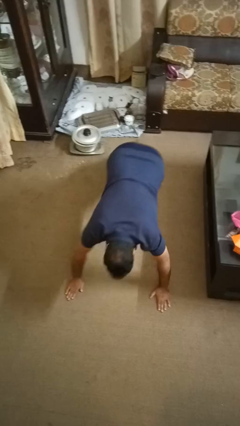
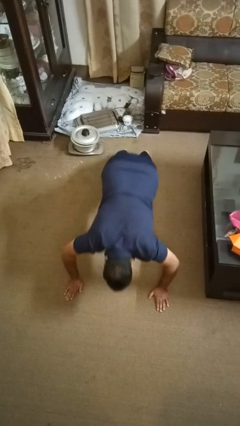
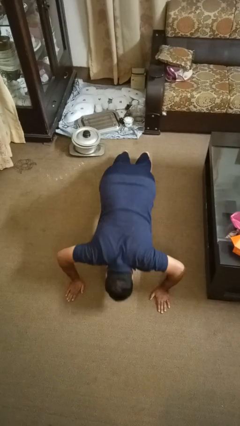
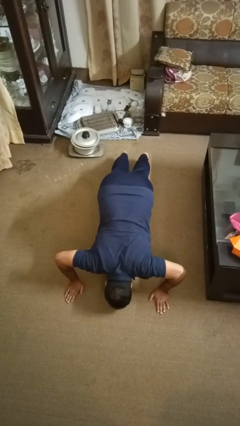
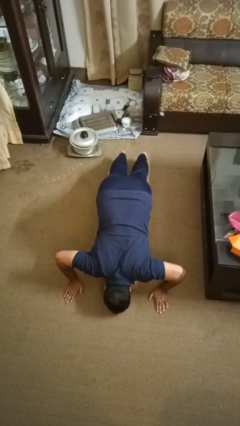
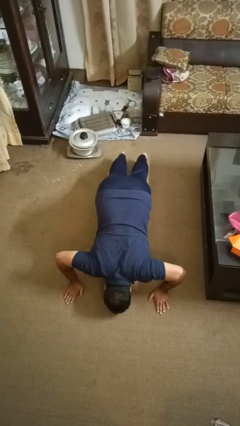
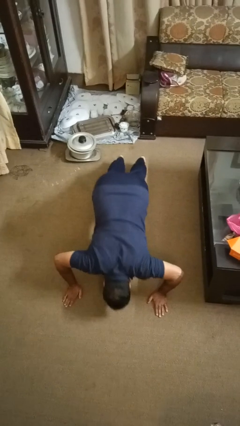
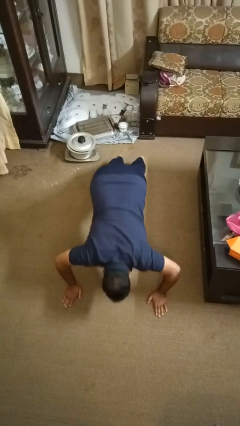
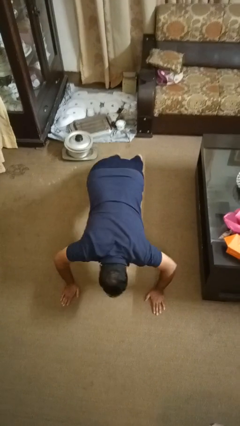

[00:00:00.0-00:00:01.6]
person exercises with pushup

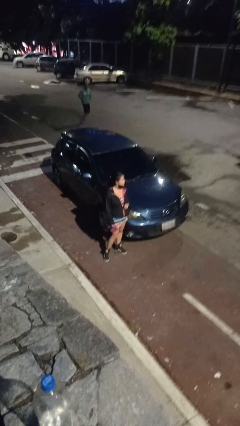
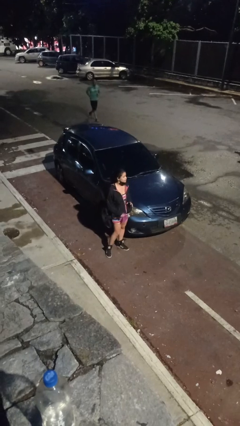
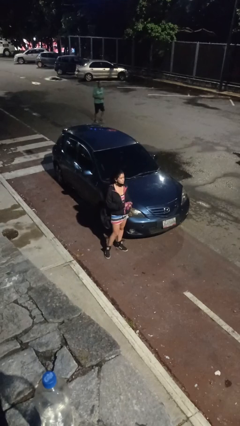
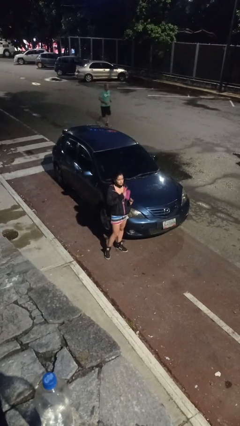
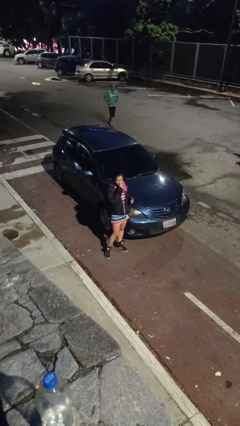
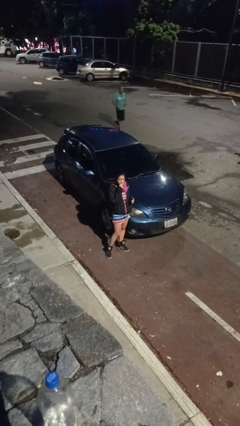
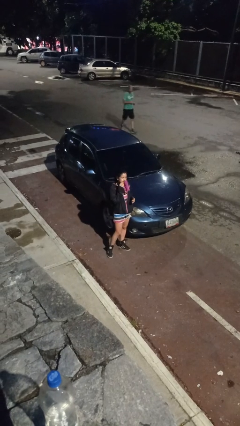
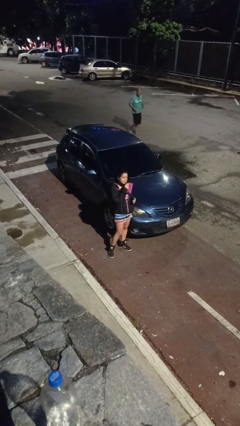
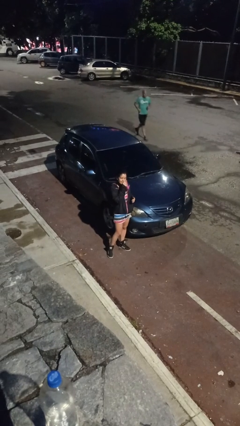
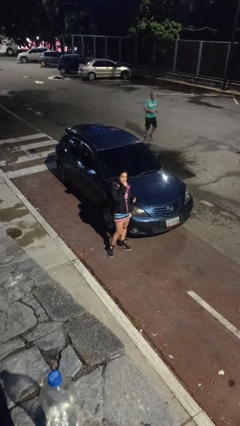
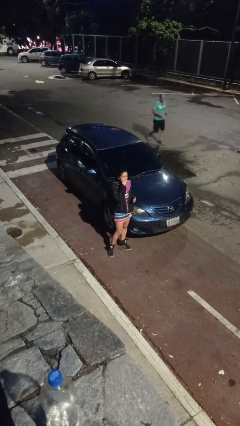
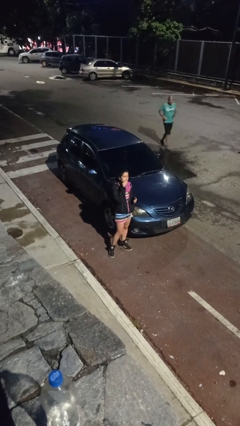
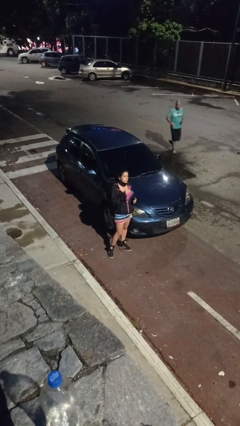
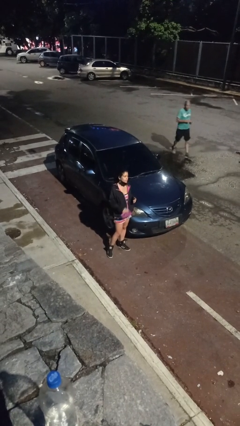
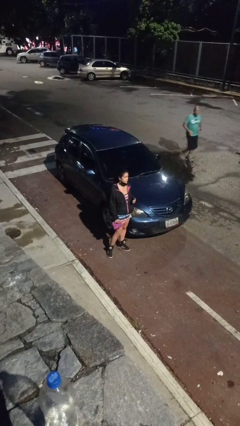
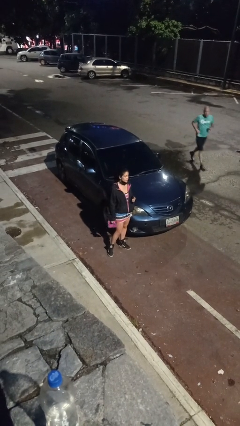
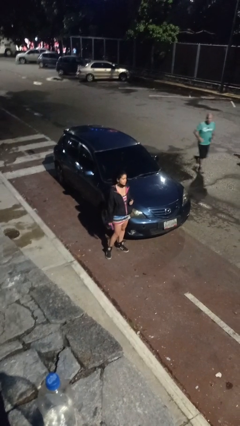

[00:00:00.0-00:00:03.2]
person wipes mouth with napkin

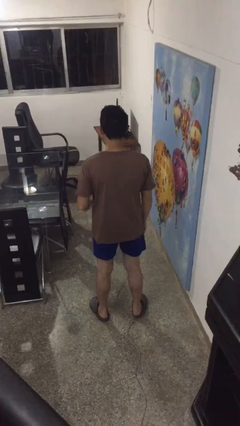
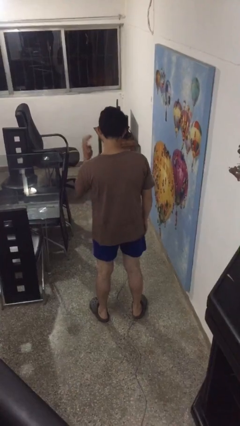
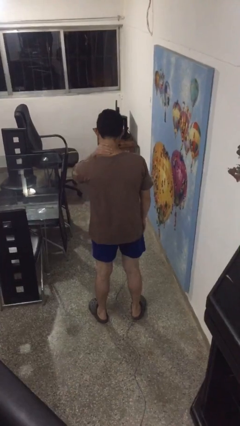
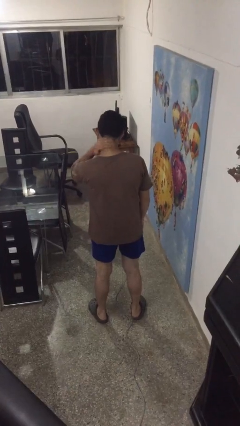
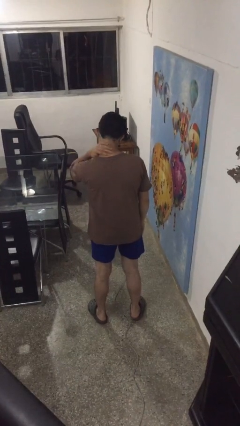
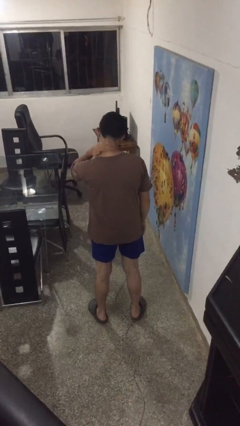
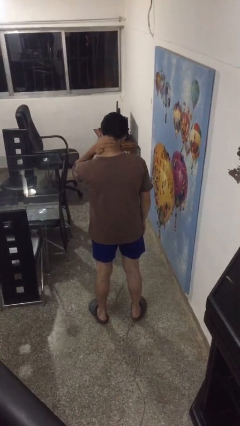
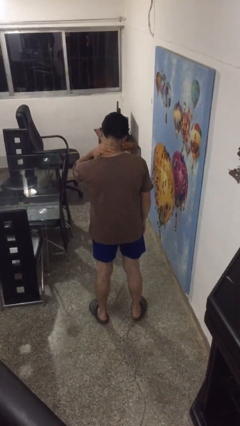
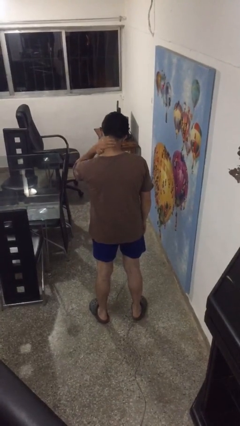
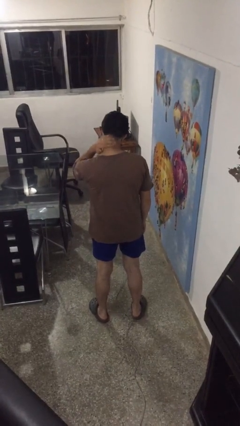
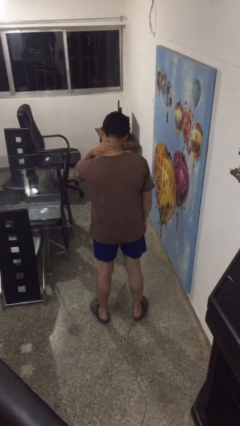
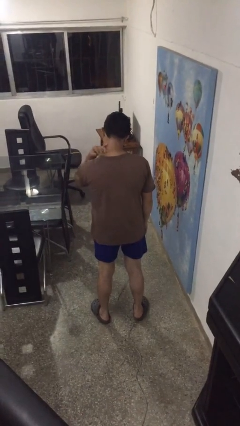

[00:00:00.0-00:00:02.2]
person swats bug

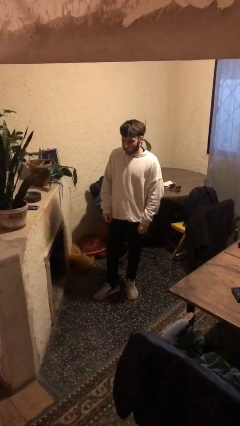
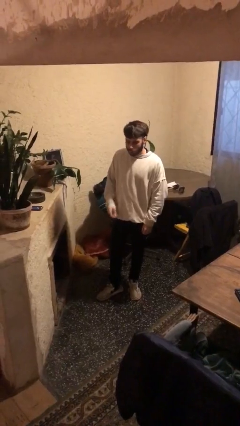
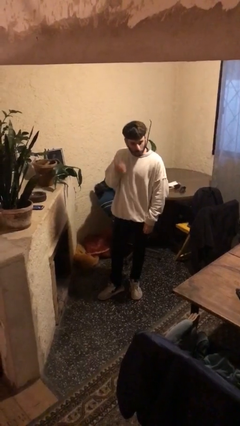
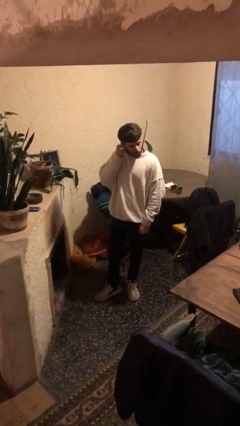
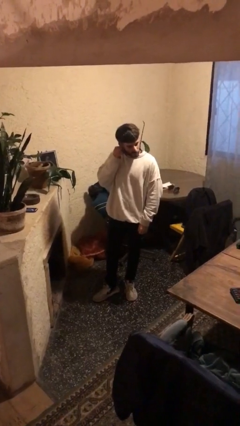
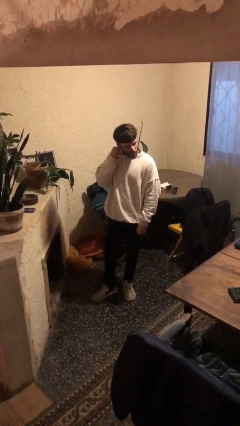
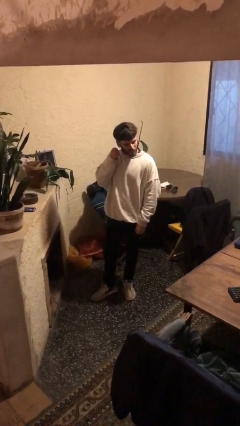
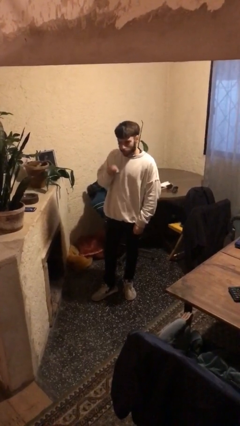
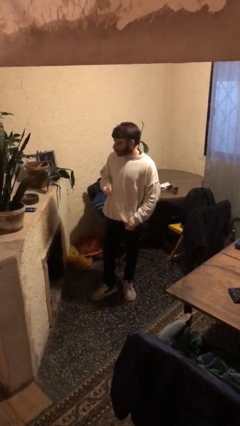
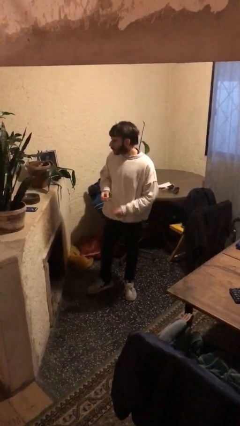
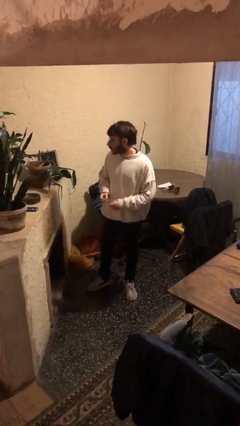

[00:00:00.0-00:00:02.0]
person takes off earrings

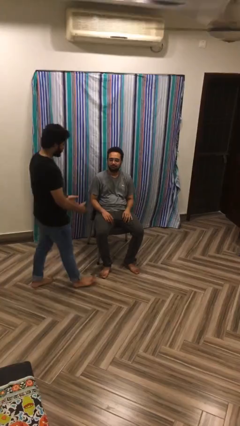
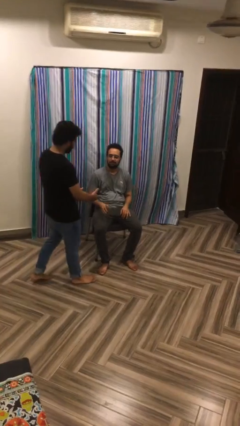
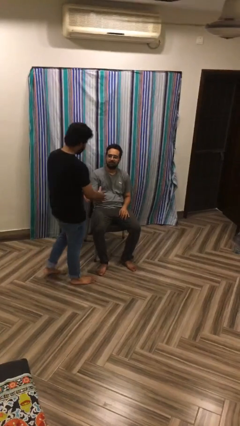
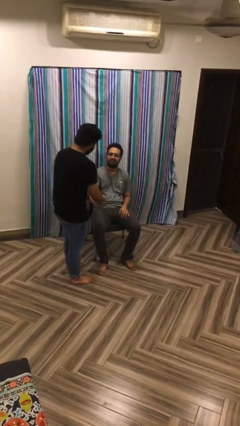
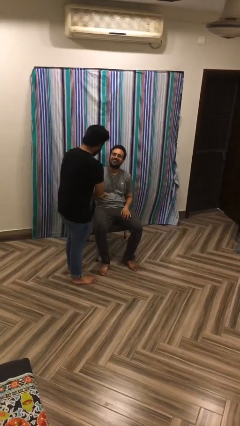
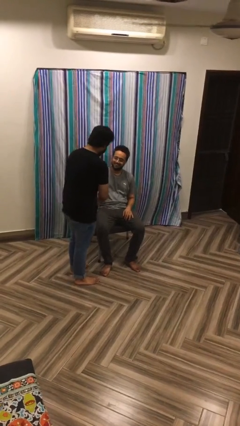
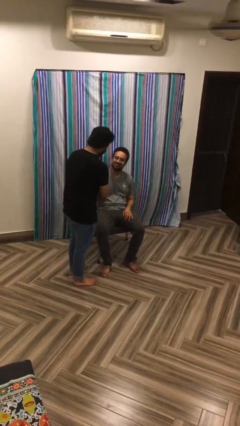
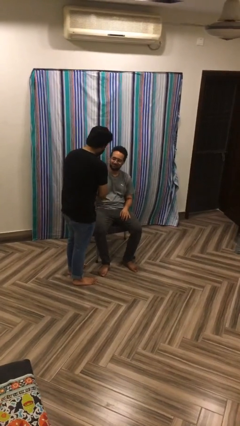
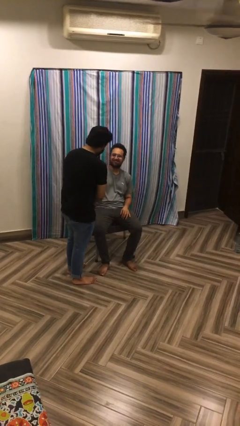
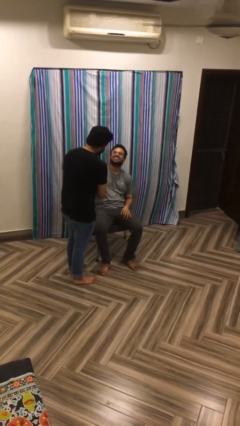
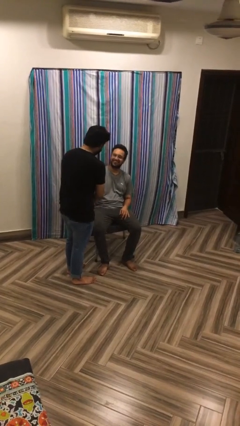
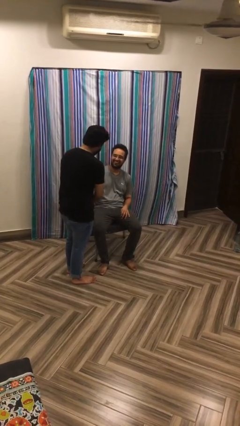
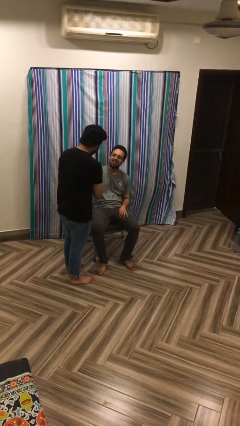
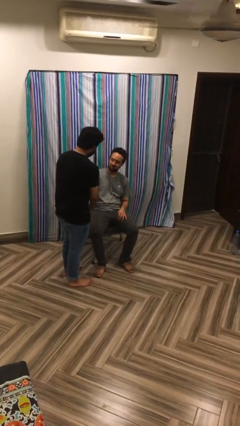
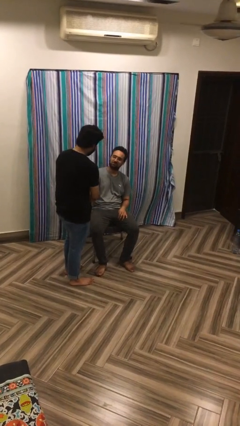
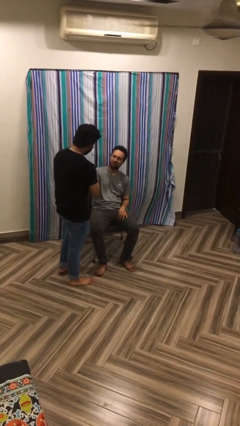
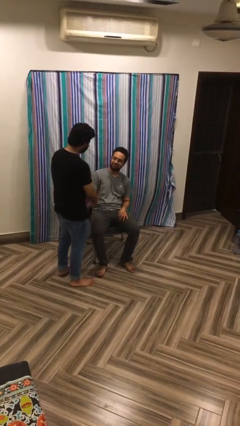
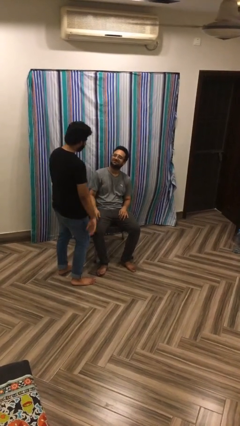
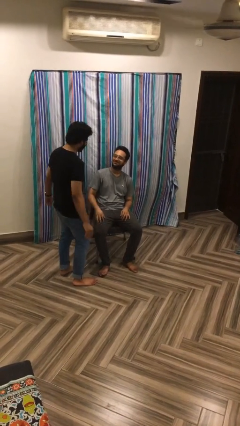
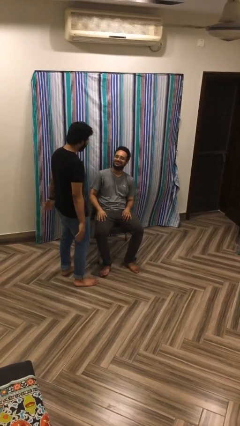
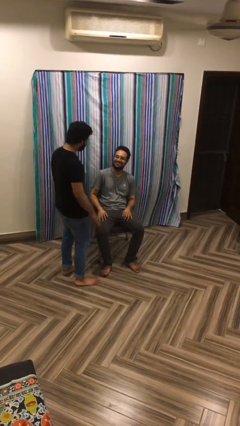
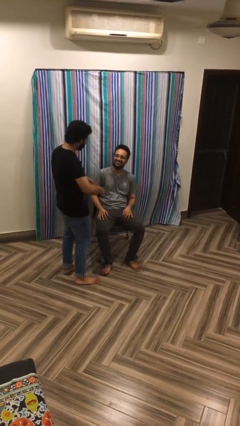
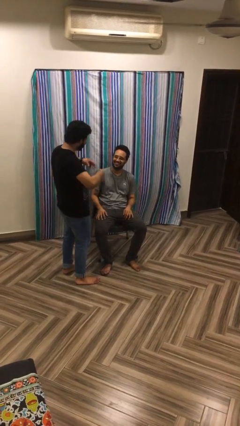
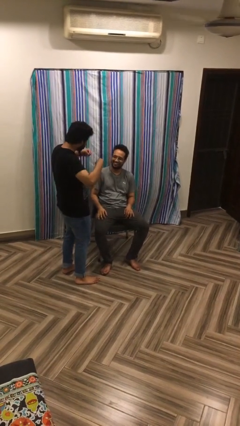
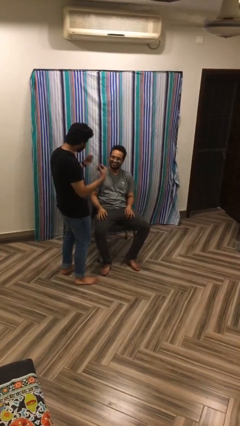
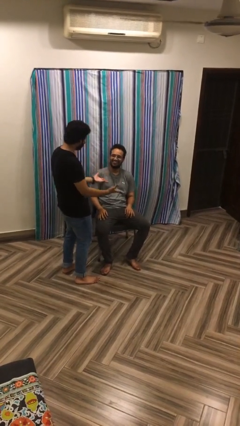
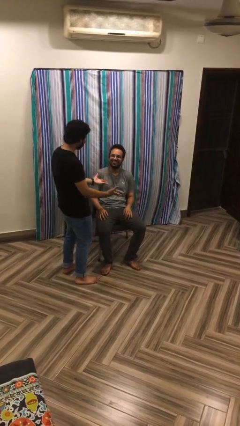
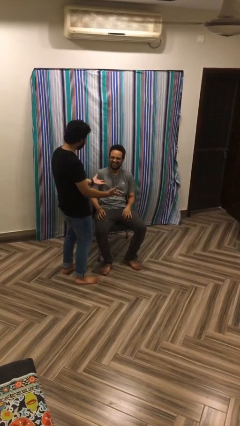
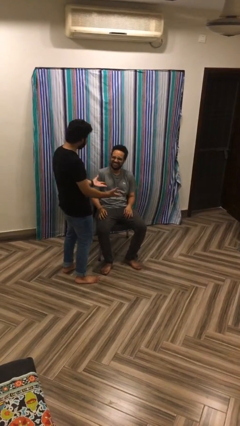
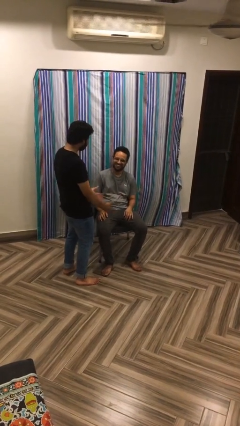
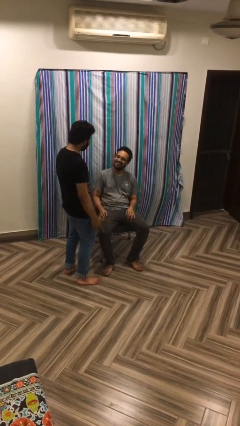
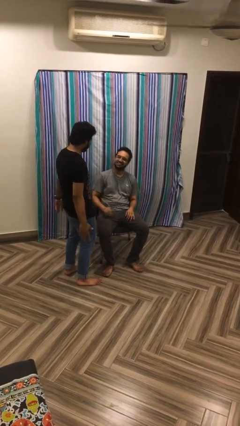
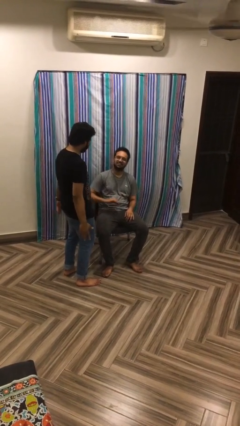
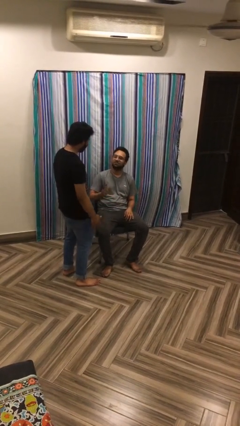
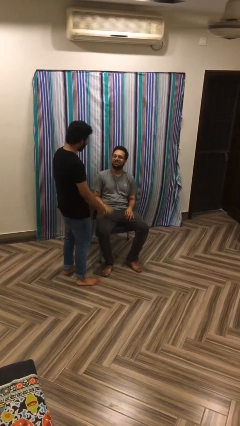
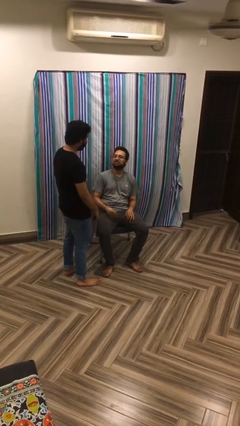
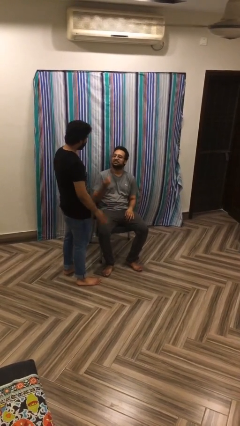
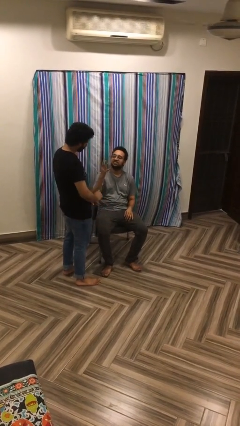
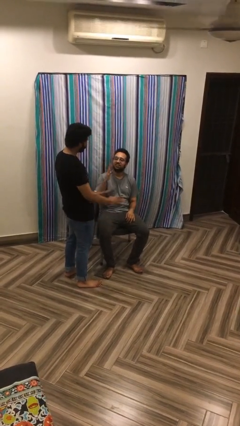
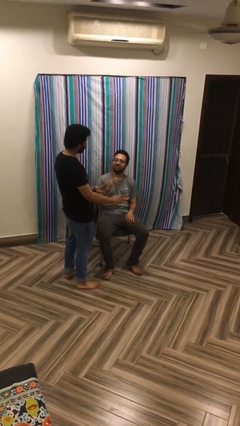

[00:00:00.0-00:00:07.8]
person shakes hand

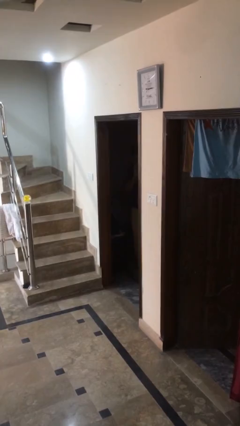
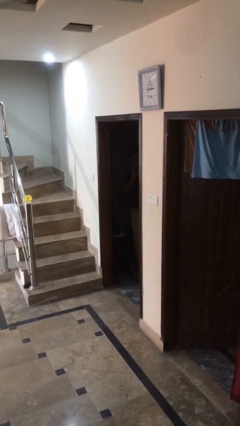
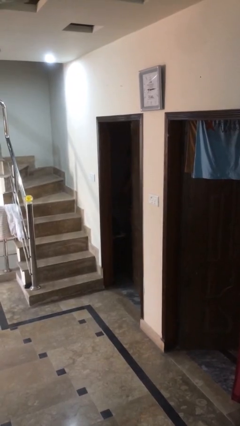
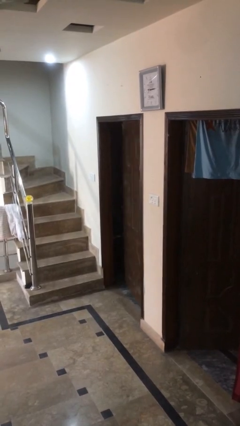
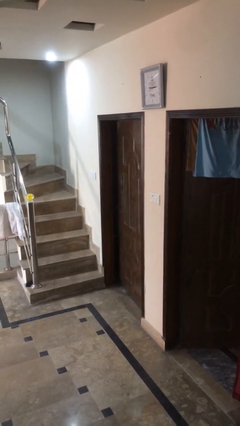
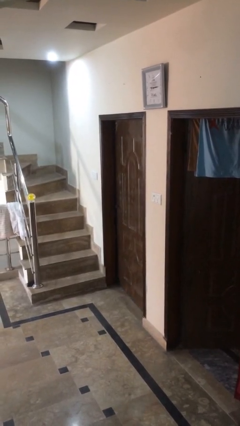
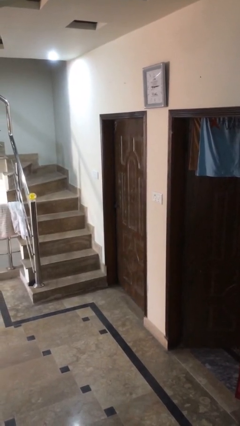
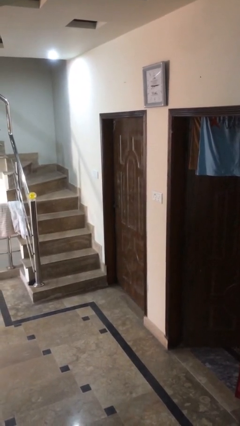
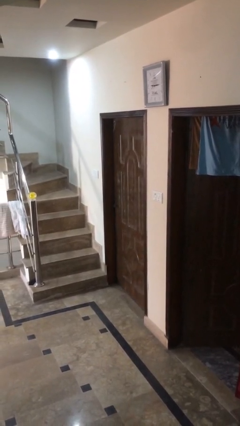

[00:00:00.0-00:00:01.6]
person closes facility door
